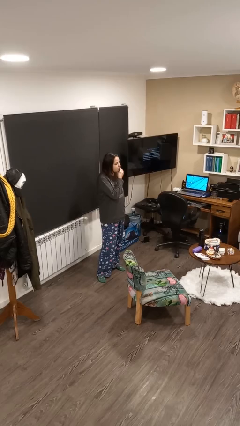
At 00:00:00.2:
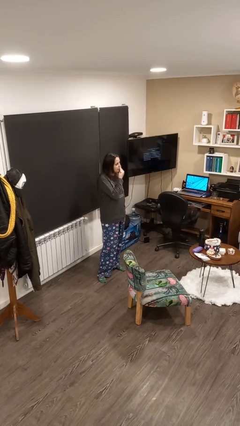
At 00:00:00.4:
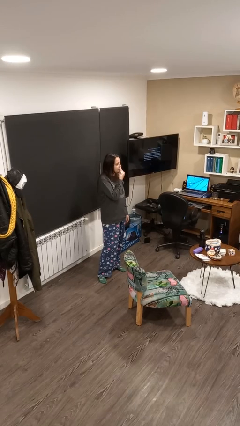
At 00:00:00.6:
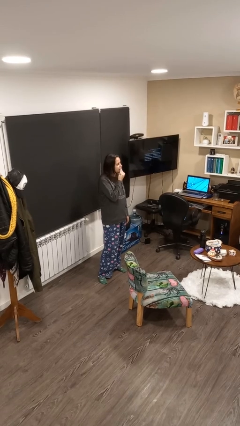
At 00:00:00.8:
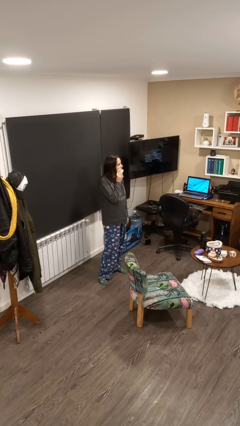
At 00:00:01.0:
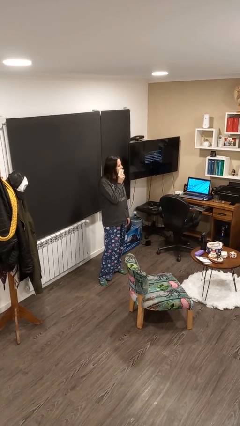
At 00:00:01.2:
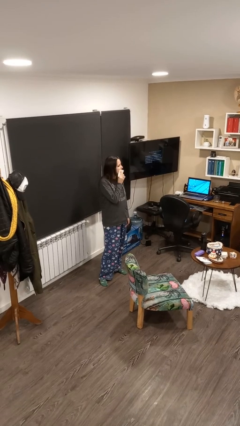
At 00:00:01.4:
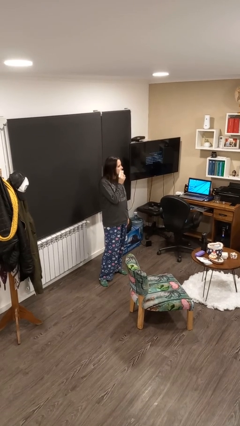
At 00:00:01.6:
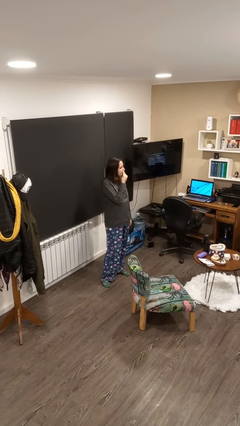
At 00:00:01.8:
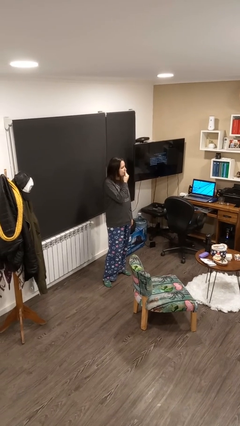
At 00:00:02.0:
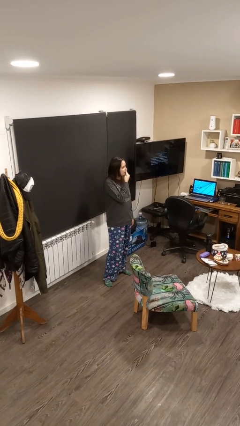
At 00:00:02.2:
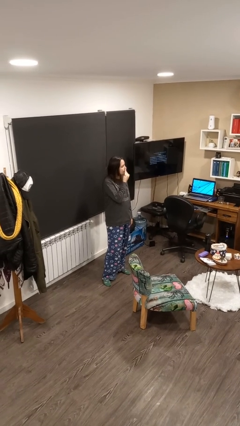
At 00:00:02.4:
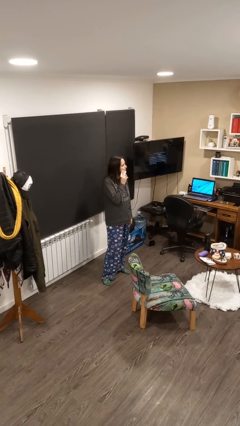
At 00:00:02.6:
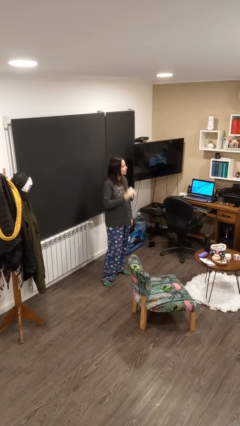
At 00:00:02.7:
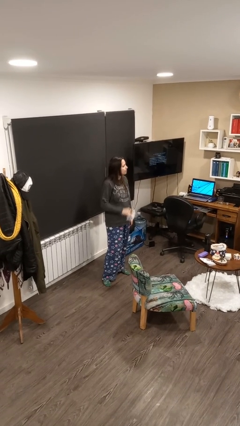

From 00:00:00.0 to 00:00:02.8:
person wipes mouth with napkin

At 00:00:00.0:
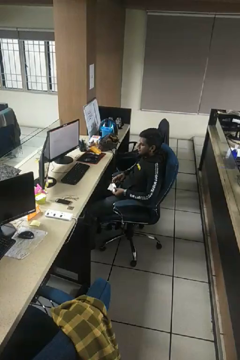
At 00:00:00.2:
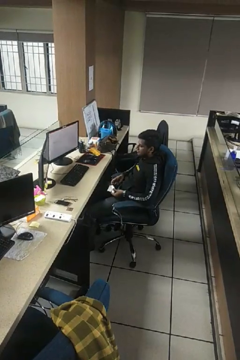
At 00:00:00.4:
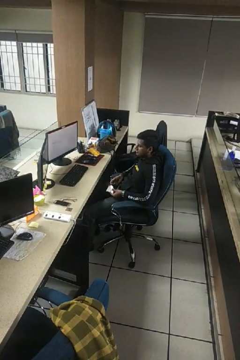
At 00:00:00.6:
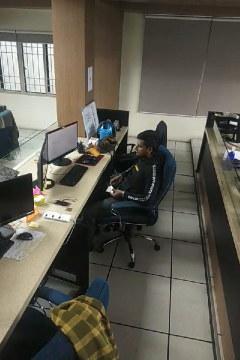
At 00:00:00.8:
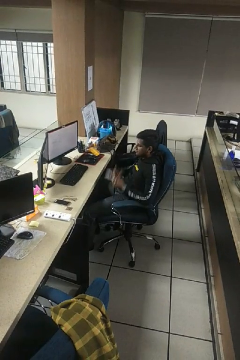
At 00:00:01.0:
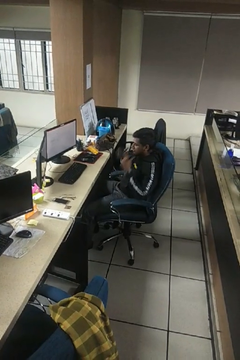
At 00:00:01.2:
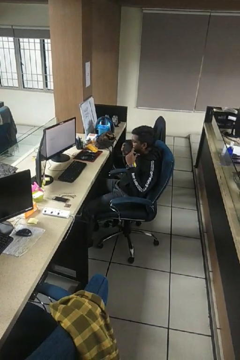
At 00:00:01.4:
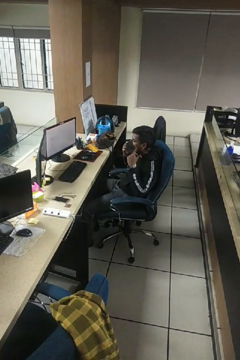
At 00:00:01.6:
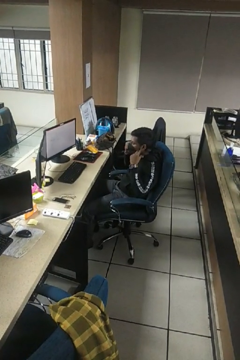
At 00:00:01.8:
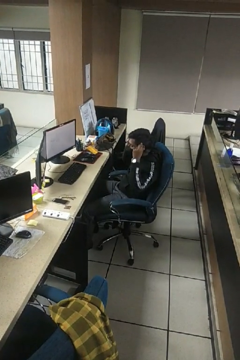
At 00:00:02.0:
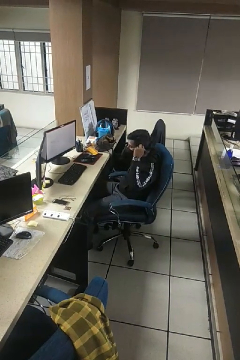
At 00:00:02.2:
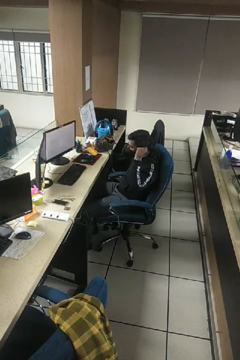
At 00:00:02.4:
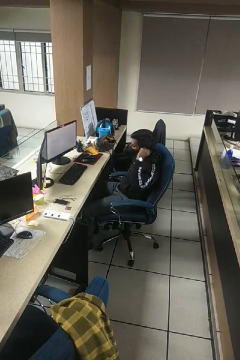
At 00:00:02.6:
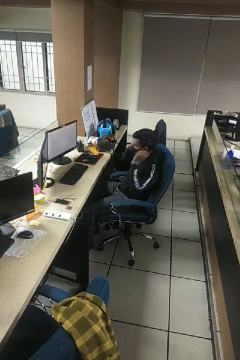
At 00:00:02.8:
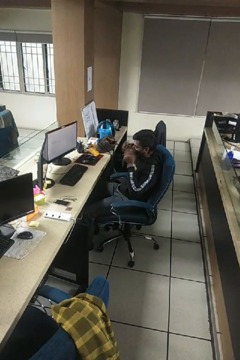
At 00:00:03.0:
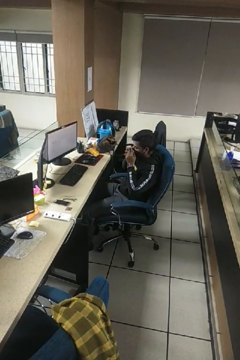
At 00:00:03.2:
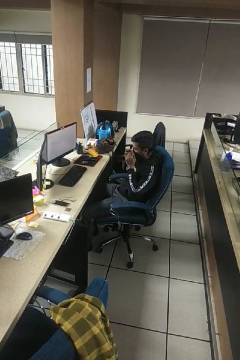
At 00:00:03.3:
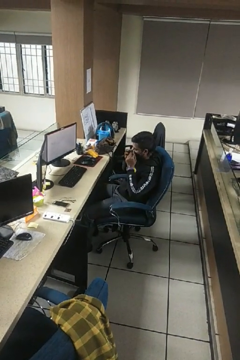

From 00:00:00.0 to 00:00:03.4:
person puts on facemask

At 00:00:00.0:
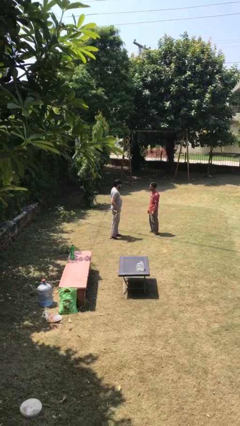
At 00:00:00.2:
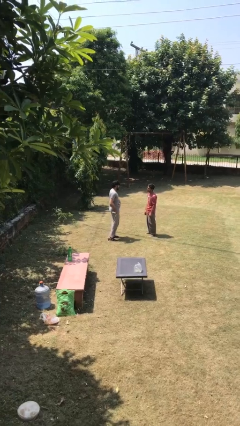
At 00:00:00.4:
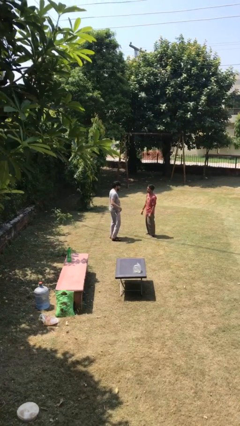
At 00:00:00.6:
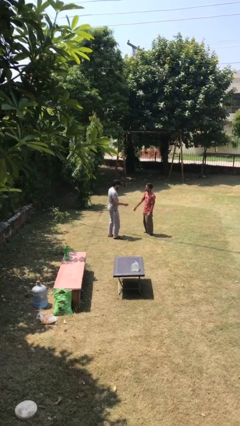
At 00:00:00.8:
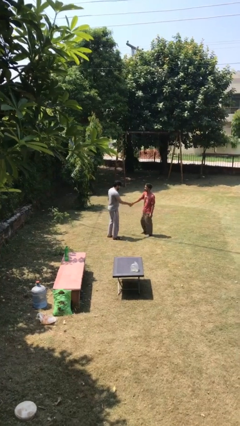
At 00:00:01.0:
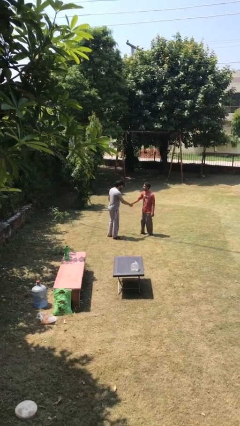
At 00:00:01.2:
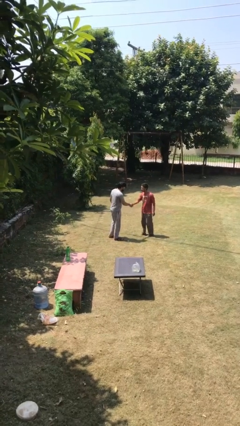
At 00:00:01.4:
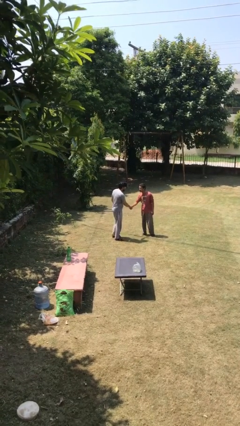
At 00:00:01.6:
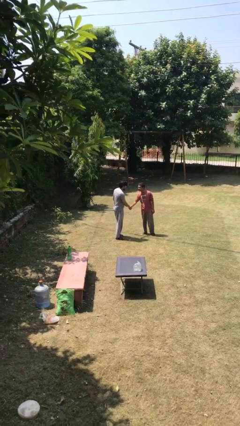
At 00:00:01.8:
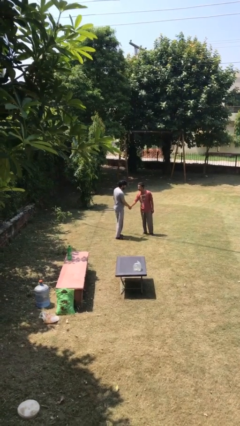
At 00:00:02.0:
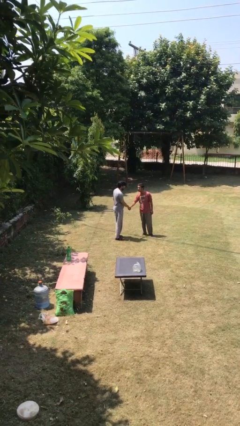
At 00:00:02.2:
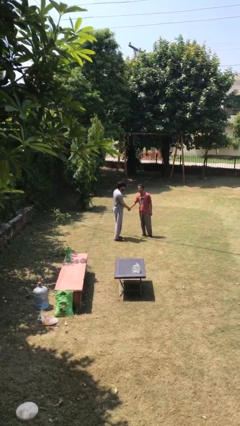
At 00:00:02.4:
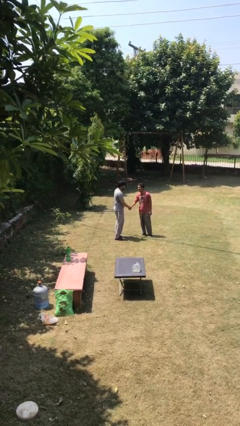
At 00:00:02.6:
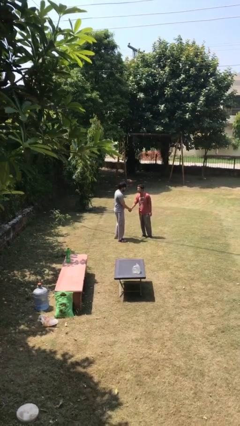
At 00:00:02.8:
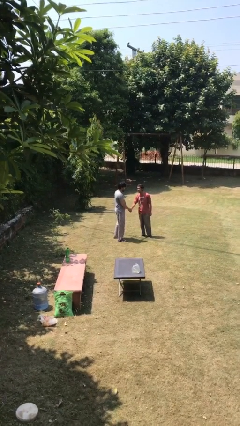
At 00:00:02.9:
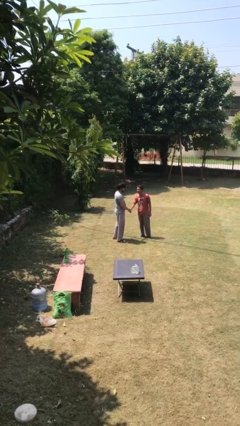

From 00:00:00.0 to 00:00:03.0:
person shakes hand

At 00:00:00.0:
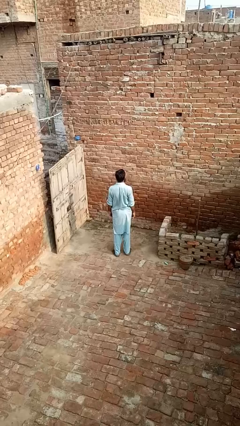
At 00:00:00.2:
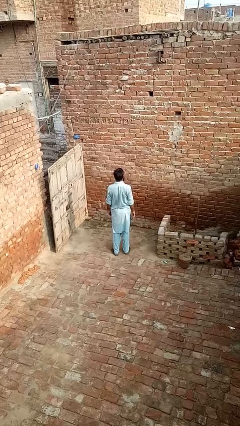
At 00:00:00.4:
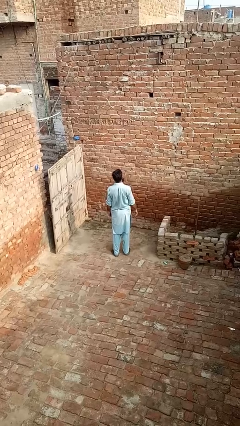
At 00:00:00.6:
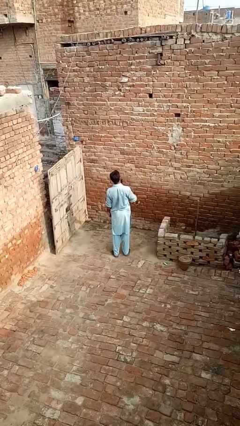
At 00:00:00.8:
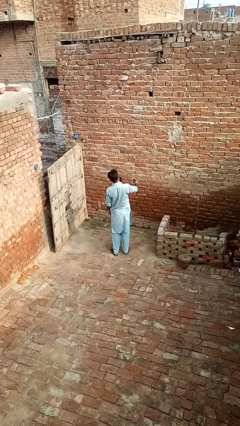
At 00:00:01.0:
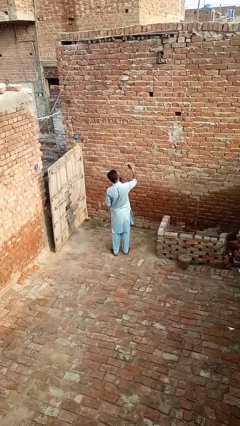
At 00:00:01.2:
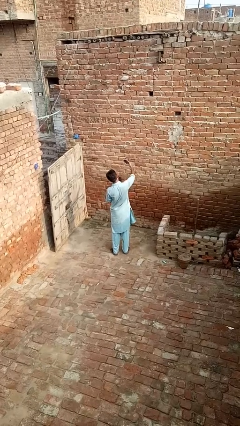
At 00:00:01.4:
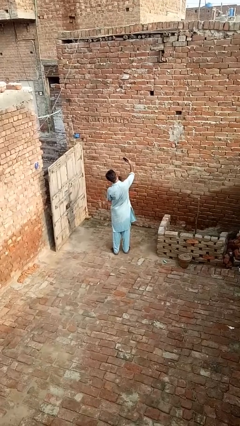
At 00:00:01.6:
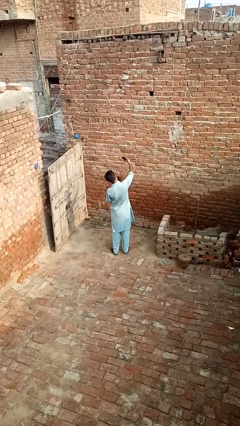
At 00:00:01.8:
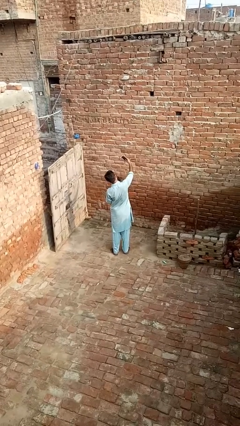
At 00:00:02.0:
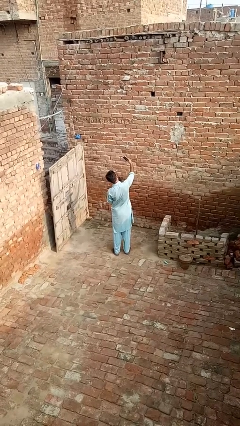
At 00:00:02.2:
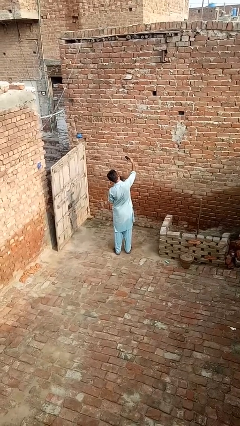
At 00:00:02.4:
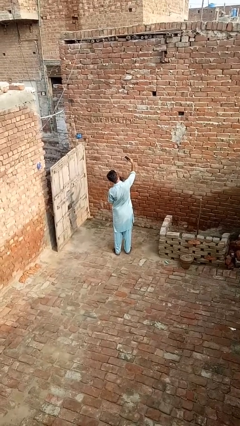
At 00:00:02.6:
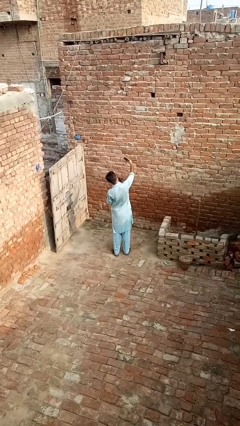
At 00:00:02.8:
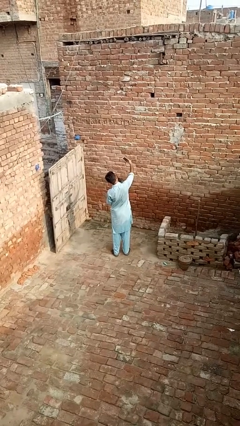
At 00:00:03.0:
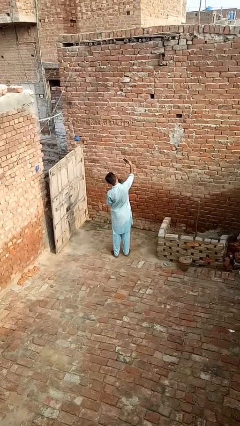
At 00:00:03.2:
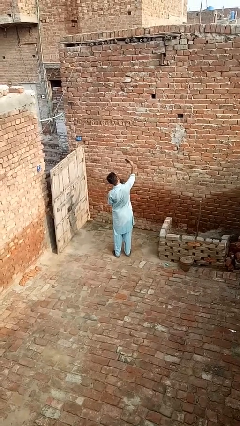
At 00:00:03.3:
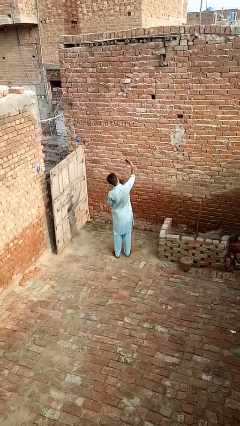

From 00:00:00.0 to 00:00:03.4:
person takes selfie

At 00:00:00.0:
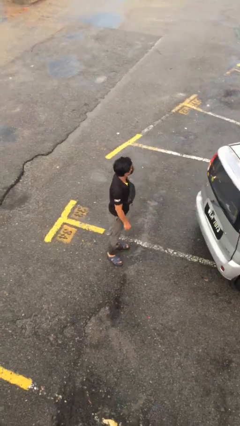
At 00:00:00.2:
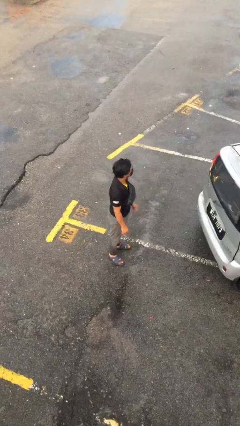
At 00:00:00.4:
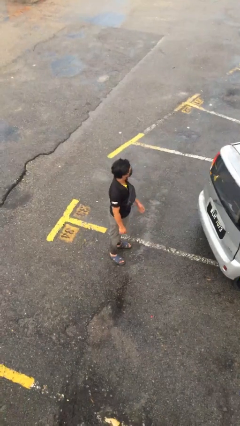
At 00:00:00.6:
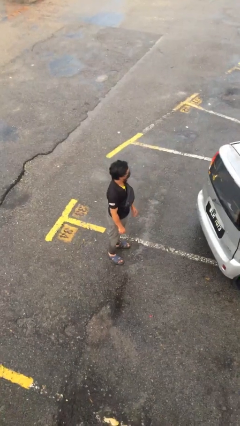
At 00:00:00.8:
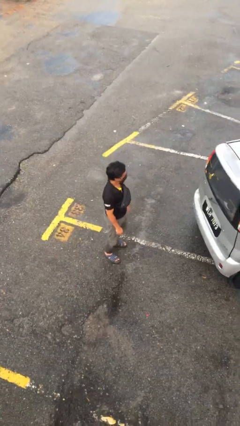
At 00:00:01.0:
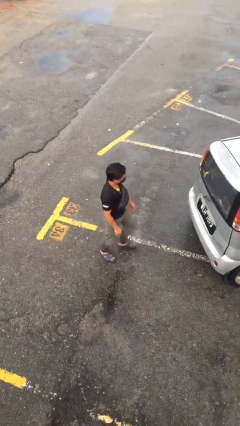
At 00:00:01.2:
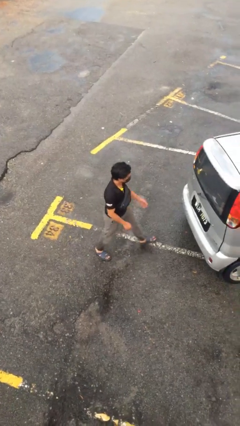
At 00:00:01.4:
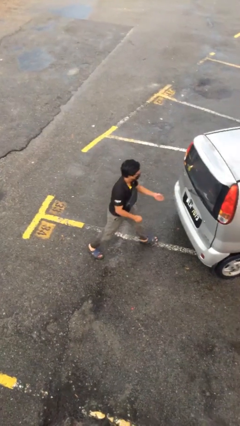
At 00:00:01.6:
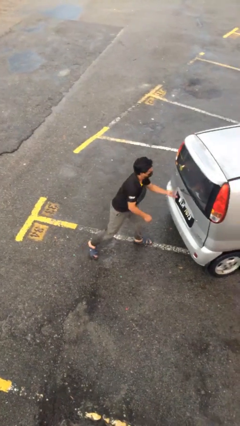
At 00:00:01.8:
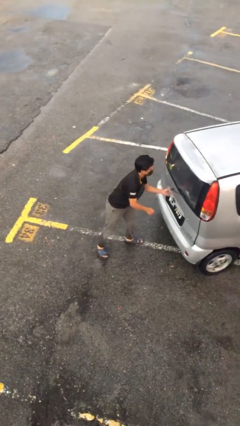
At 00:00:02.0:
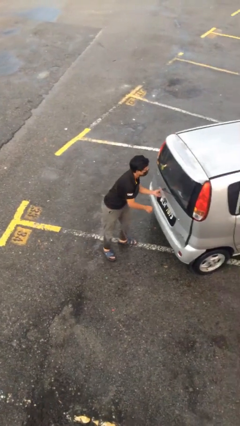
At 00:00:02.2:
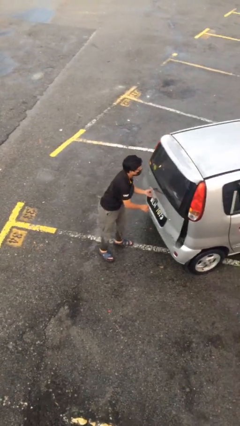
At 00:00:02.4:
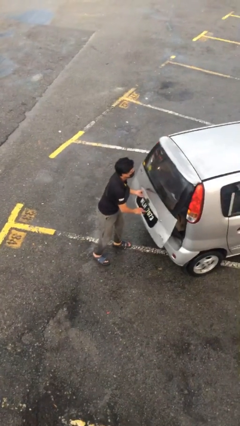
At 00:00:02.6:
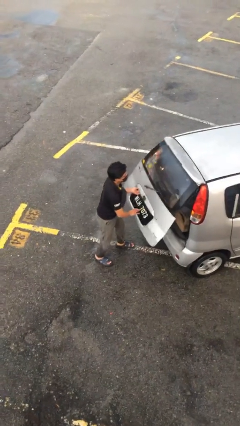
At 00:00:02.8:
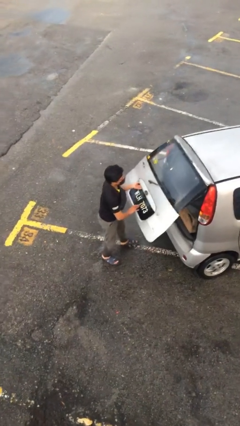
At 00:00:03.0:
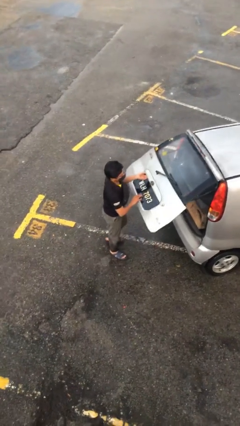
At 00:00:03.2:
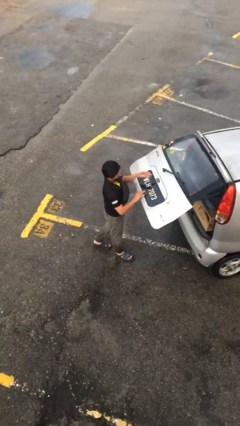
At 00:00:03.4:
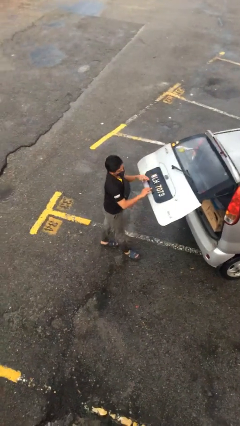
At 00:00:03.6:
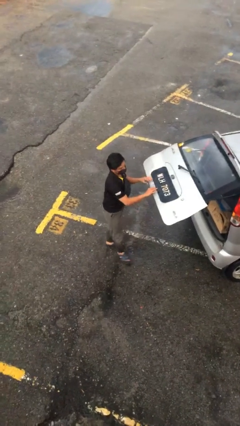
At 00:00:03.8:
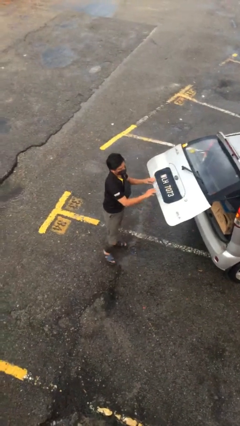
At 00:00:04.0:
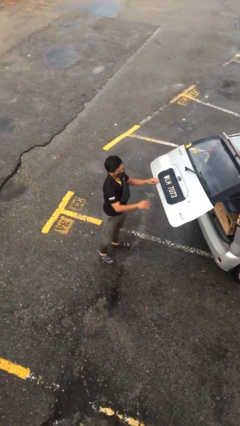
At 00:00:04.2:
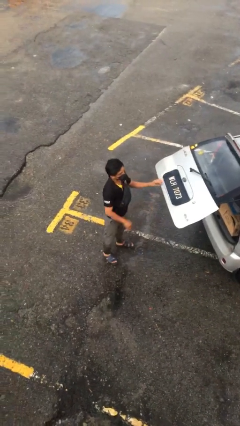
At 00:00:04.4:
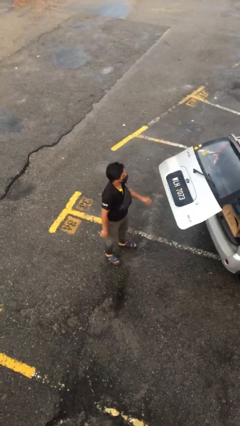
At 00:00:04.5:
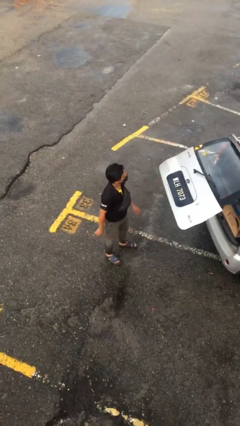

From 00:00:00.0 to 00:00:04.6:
person opens car trunk

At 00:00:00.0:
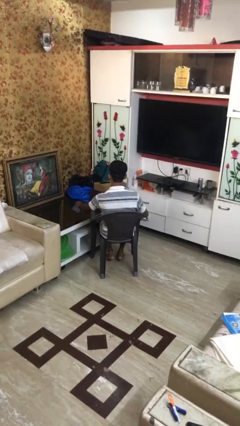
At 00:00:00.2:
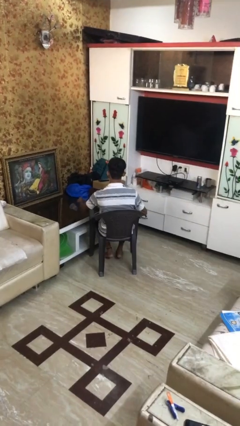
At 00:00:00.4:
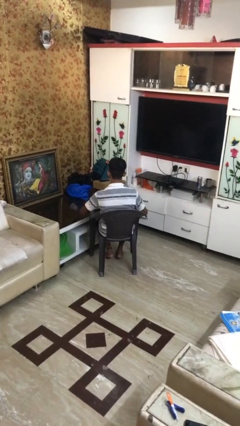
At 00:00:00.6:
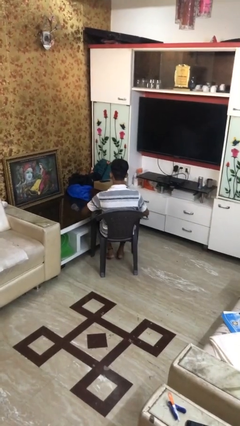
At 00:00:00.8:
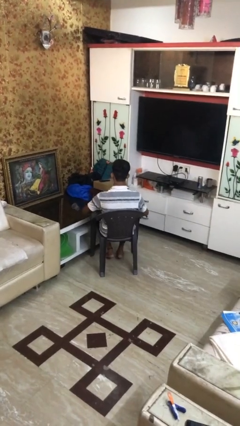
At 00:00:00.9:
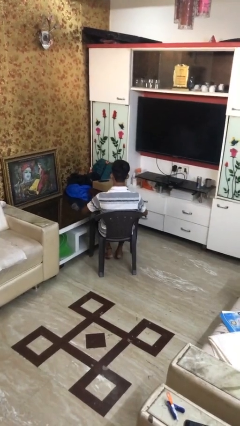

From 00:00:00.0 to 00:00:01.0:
person knocks over glass
